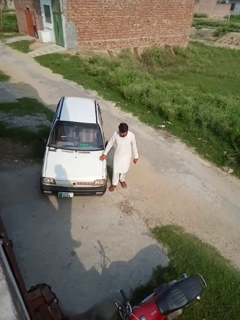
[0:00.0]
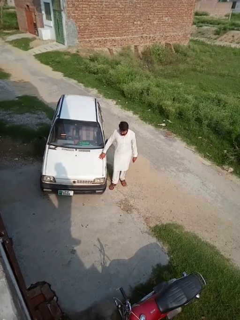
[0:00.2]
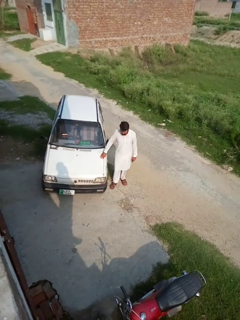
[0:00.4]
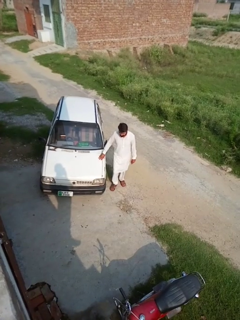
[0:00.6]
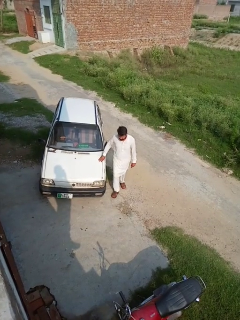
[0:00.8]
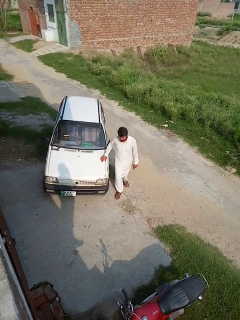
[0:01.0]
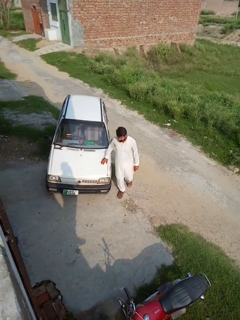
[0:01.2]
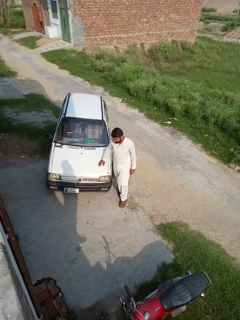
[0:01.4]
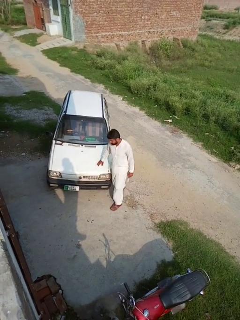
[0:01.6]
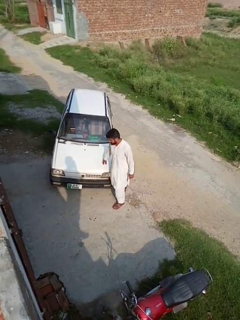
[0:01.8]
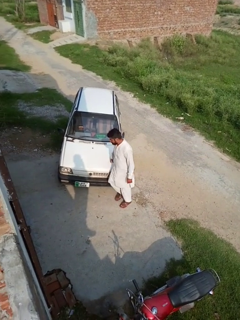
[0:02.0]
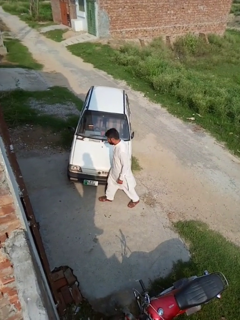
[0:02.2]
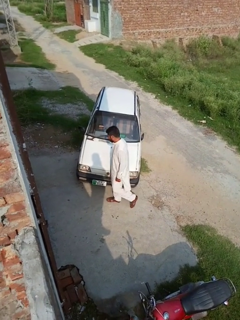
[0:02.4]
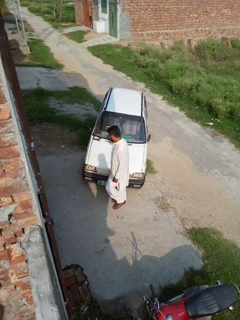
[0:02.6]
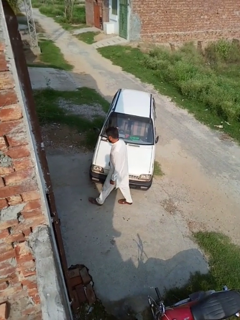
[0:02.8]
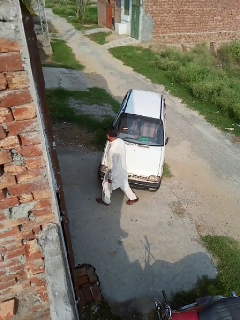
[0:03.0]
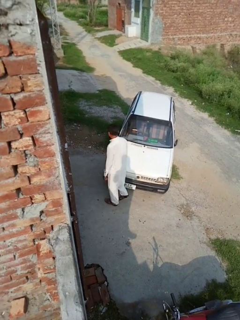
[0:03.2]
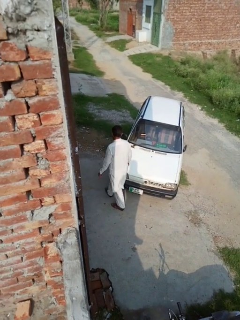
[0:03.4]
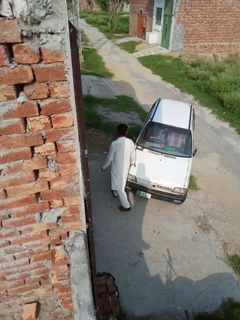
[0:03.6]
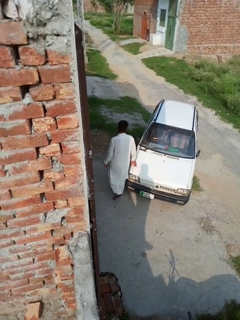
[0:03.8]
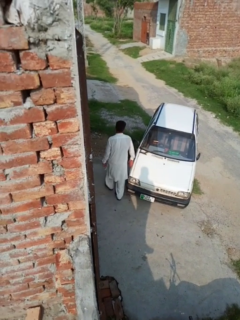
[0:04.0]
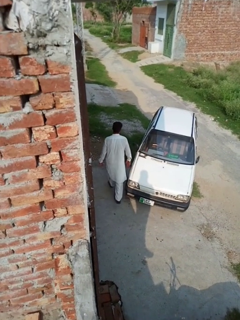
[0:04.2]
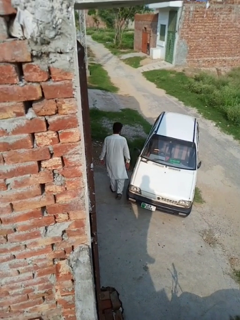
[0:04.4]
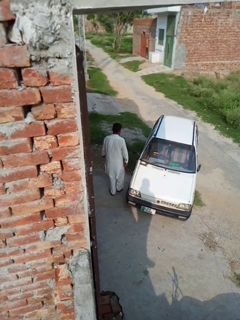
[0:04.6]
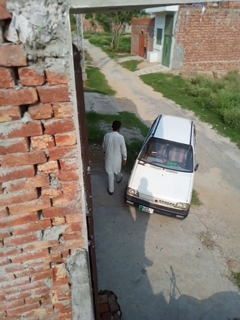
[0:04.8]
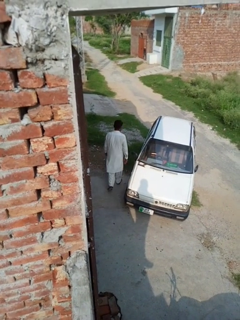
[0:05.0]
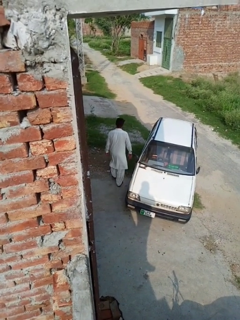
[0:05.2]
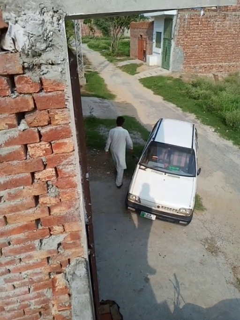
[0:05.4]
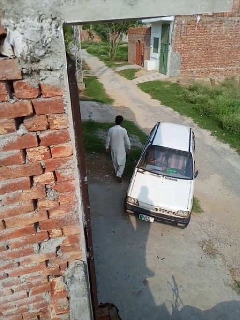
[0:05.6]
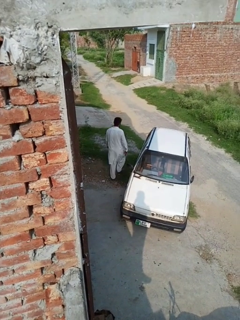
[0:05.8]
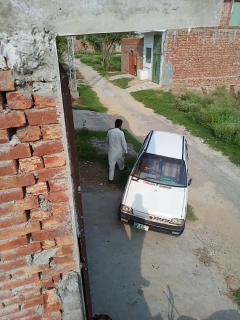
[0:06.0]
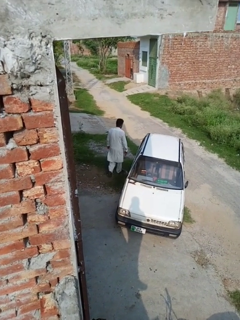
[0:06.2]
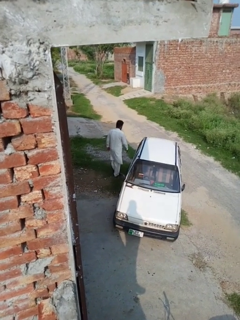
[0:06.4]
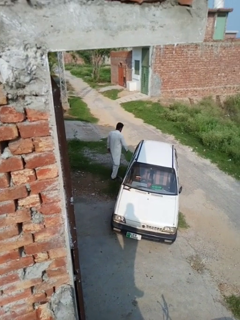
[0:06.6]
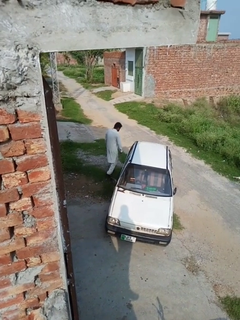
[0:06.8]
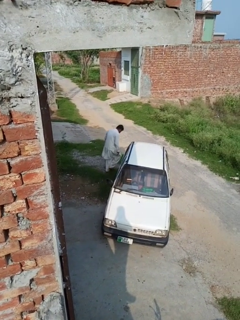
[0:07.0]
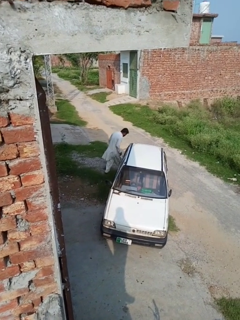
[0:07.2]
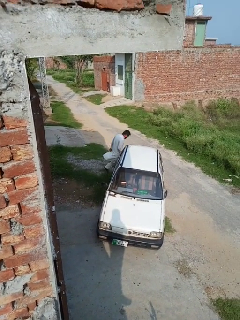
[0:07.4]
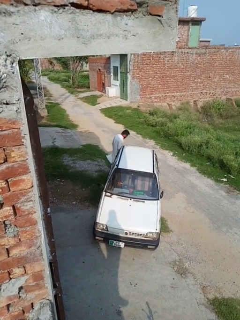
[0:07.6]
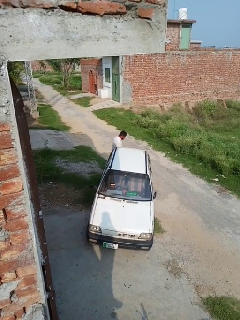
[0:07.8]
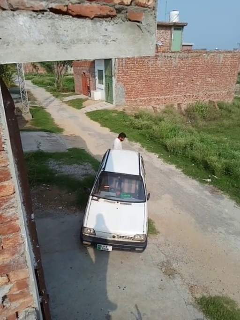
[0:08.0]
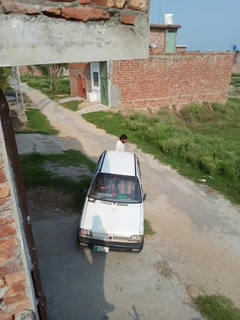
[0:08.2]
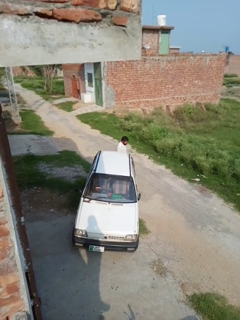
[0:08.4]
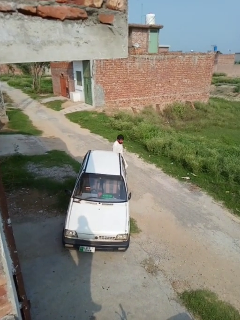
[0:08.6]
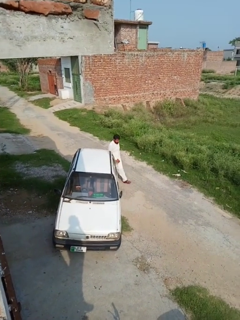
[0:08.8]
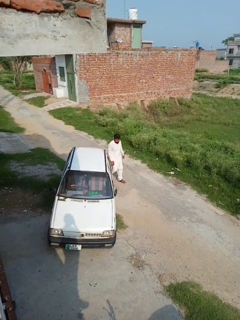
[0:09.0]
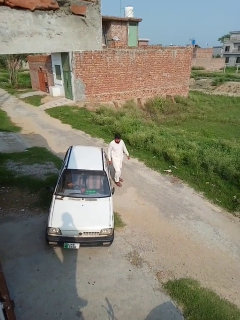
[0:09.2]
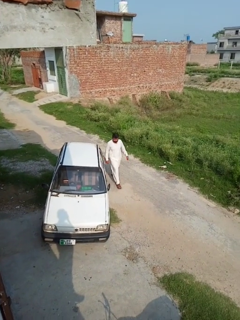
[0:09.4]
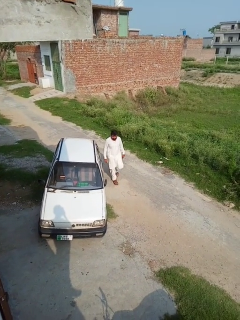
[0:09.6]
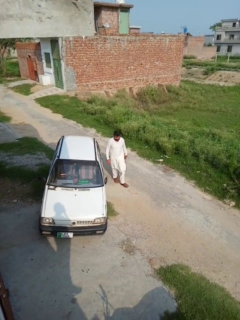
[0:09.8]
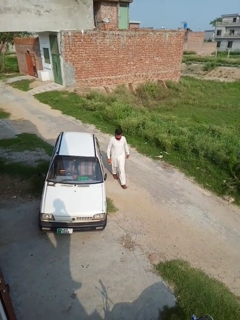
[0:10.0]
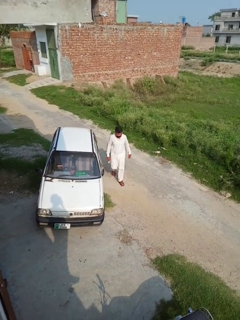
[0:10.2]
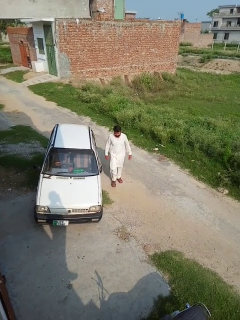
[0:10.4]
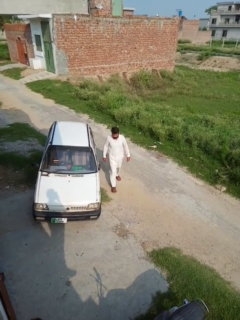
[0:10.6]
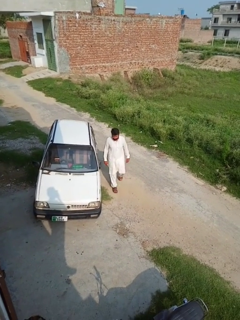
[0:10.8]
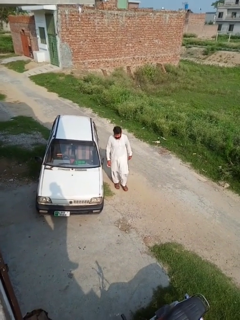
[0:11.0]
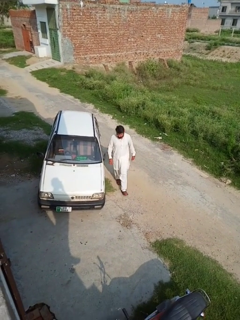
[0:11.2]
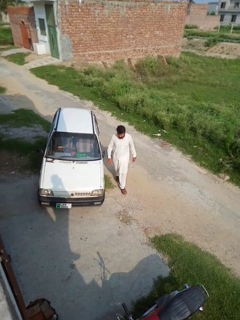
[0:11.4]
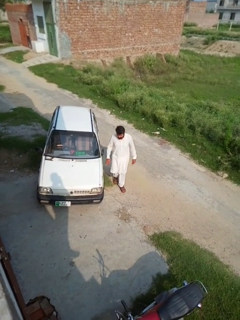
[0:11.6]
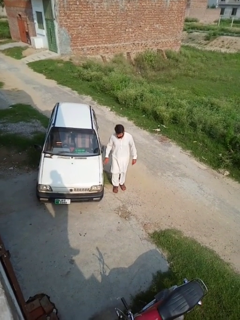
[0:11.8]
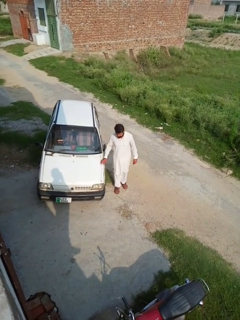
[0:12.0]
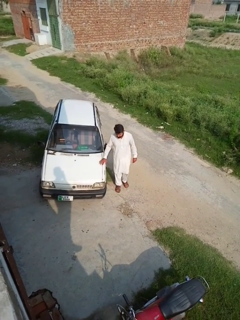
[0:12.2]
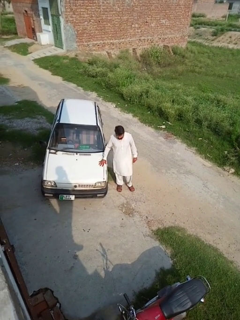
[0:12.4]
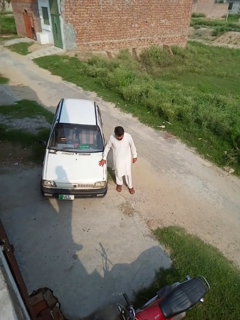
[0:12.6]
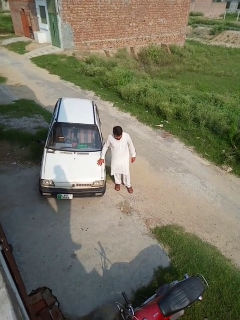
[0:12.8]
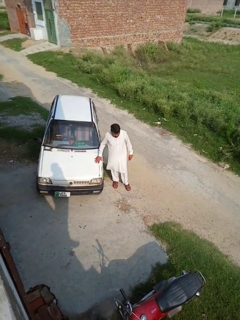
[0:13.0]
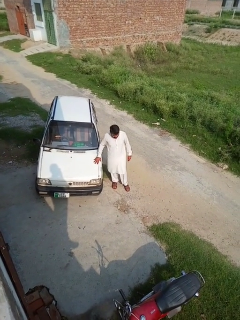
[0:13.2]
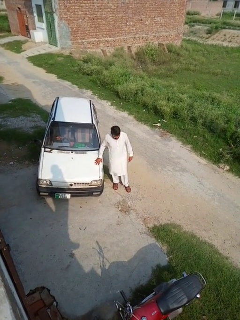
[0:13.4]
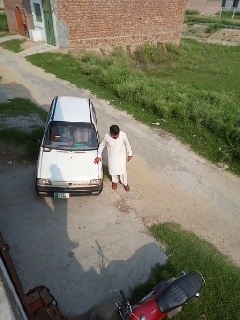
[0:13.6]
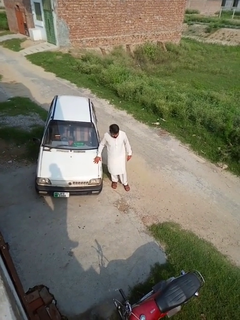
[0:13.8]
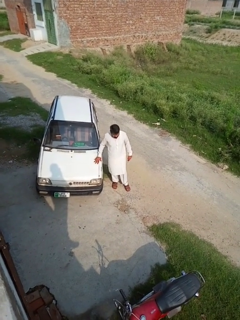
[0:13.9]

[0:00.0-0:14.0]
person walks around car

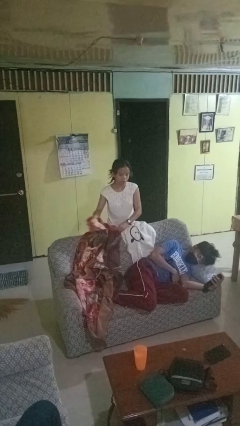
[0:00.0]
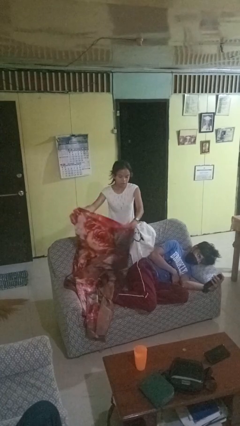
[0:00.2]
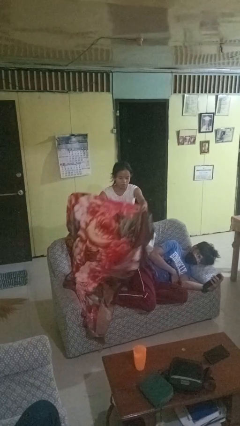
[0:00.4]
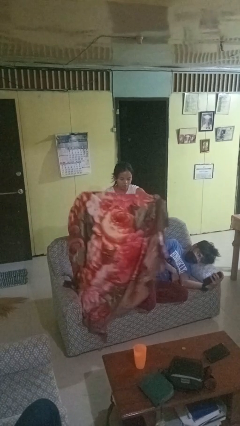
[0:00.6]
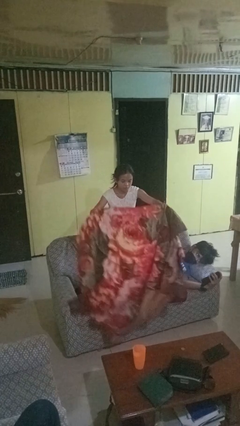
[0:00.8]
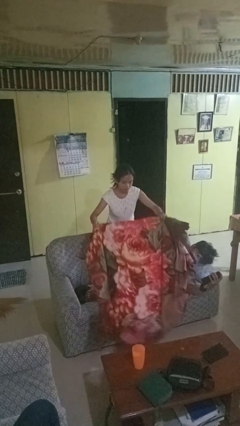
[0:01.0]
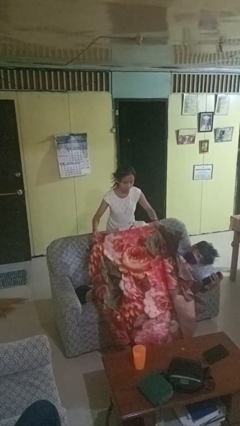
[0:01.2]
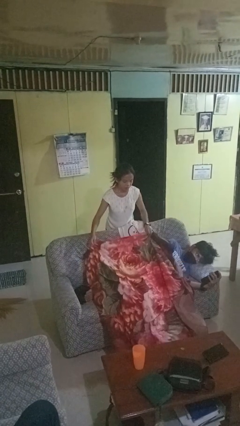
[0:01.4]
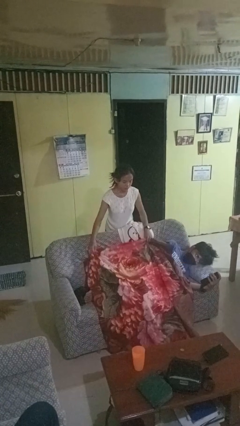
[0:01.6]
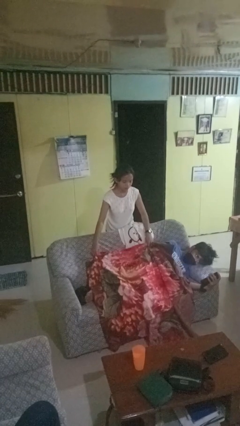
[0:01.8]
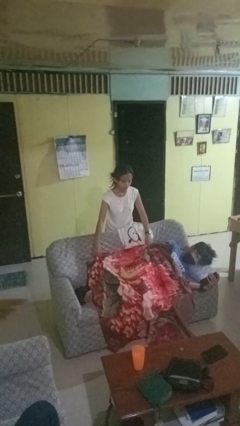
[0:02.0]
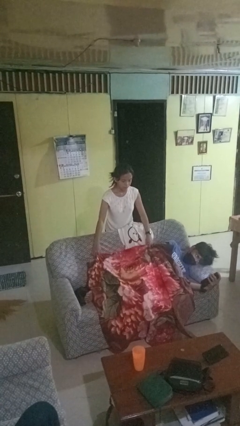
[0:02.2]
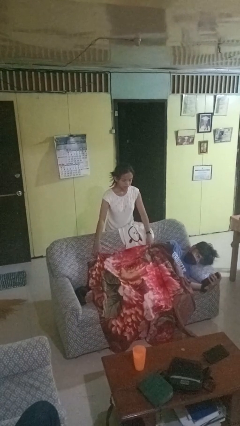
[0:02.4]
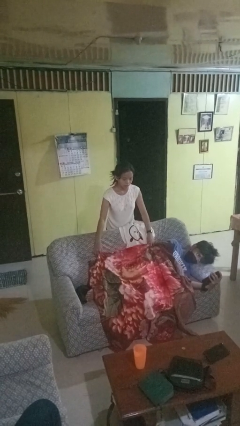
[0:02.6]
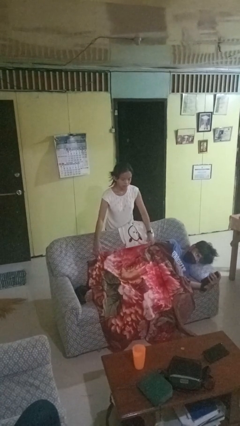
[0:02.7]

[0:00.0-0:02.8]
person covers friend with blanket

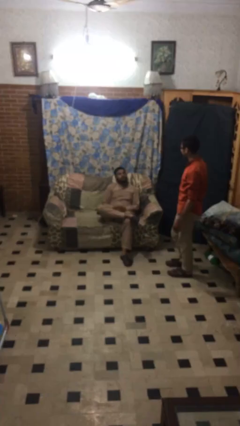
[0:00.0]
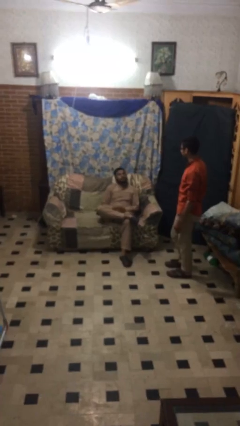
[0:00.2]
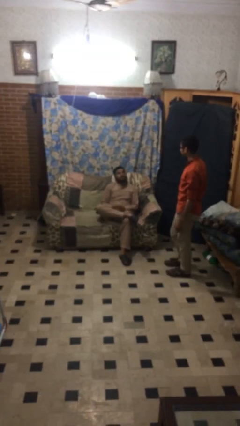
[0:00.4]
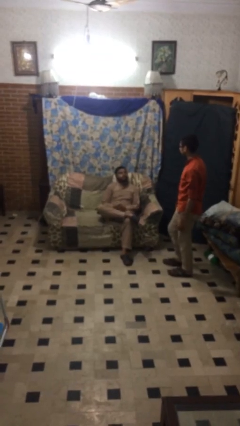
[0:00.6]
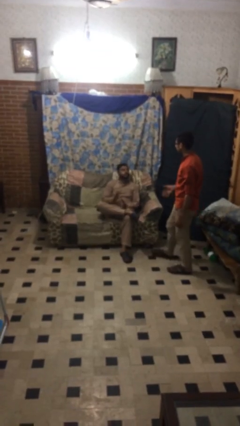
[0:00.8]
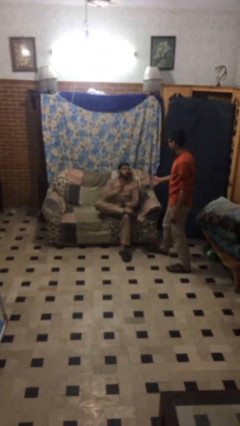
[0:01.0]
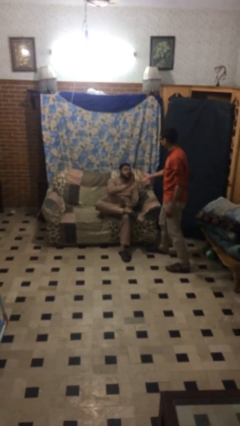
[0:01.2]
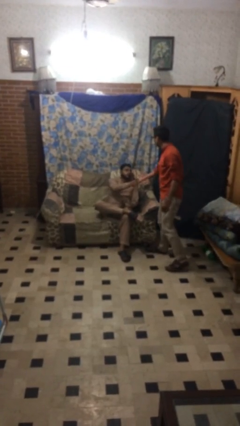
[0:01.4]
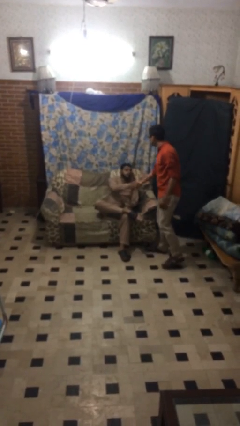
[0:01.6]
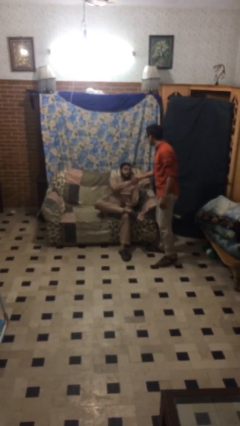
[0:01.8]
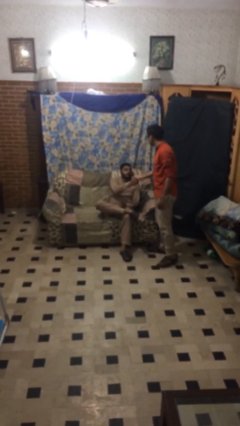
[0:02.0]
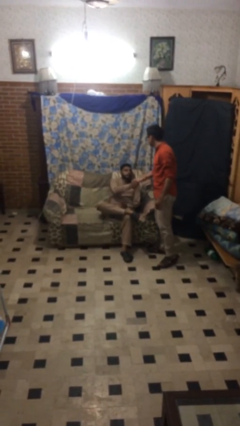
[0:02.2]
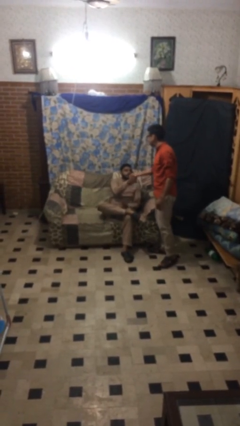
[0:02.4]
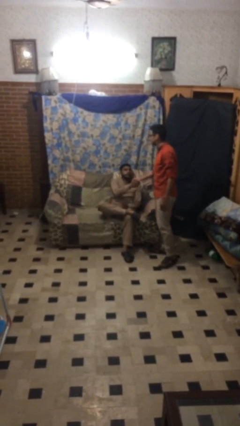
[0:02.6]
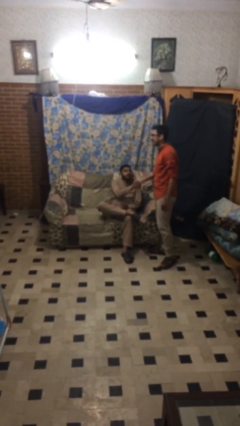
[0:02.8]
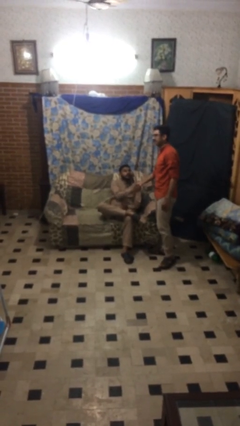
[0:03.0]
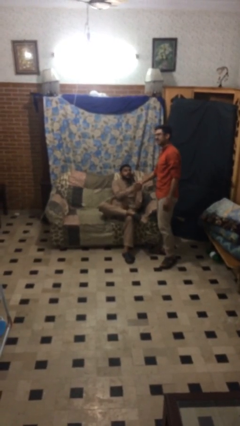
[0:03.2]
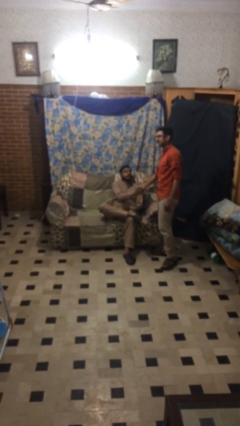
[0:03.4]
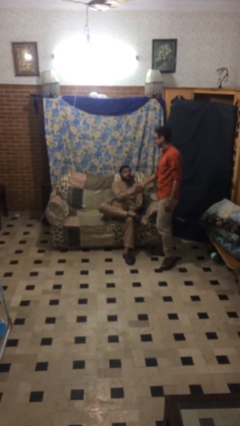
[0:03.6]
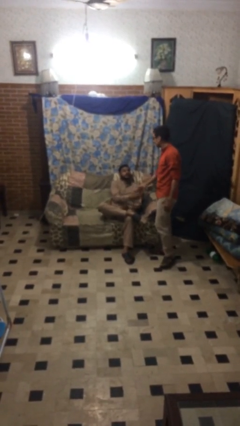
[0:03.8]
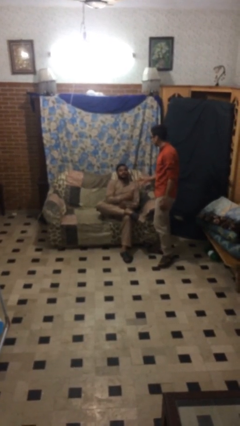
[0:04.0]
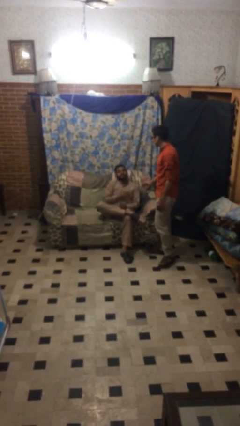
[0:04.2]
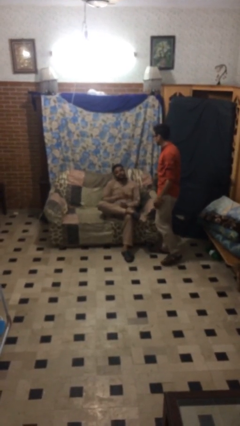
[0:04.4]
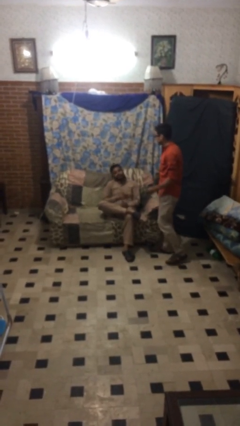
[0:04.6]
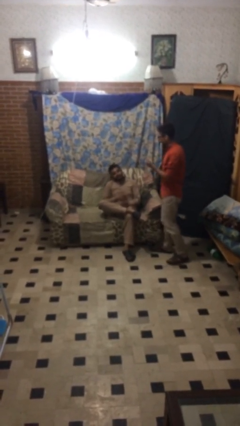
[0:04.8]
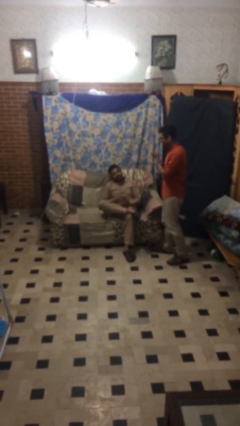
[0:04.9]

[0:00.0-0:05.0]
person shakes hand
